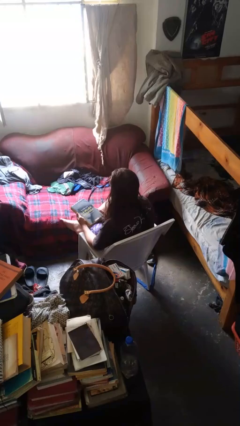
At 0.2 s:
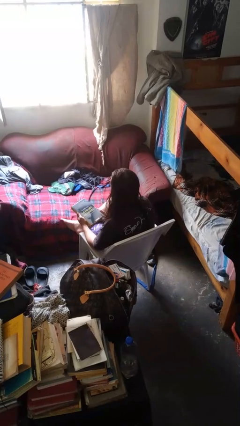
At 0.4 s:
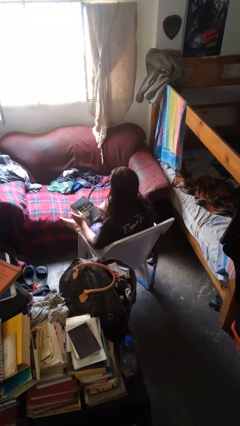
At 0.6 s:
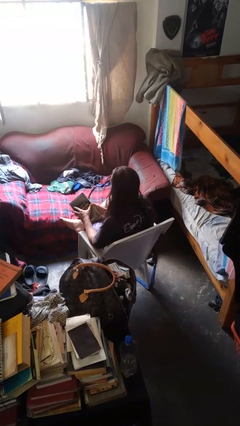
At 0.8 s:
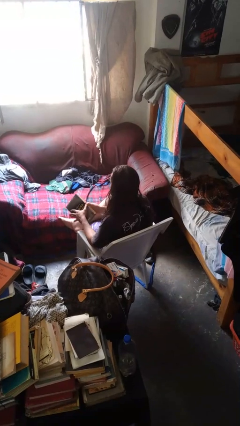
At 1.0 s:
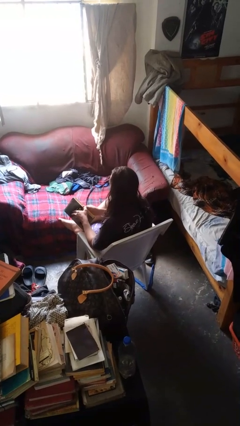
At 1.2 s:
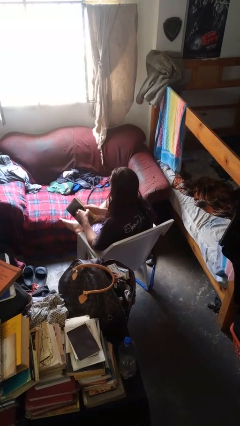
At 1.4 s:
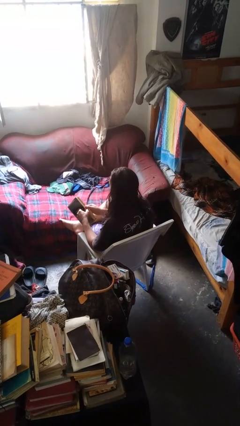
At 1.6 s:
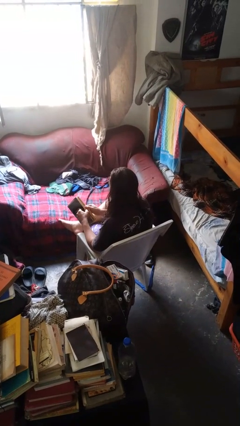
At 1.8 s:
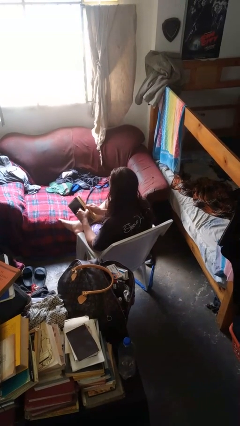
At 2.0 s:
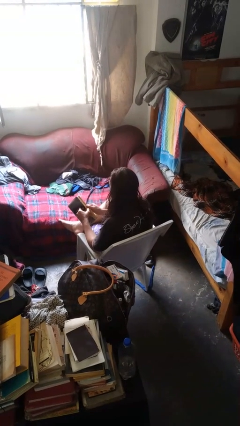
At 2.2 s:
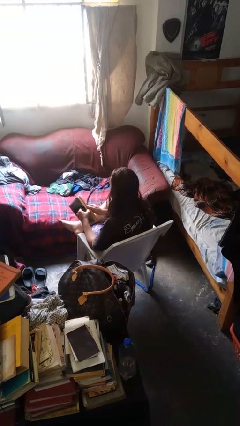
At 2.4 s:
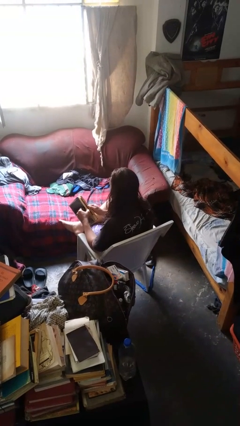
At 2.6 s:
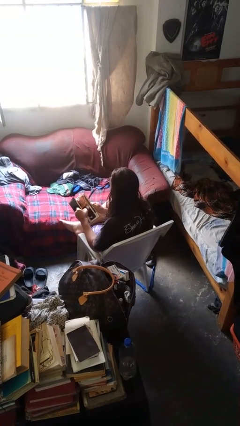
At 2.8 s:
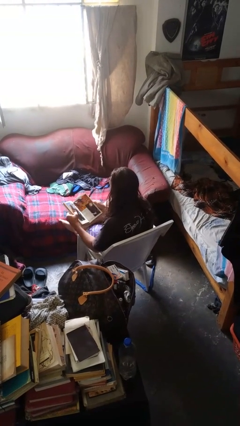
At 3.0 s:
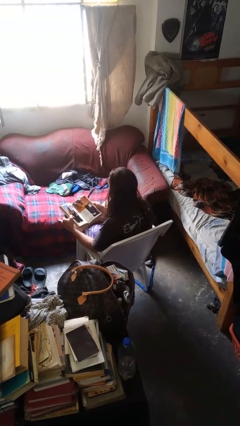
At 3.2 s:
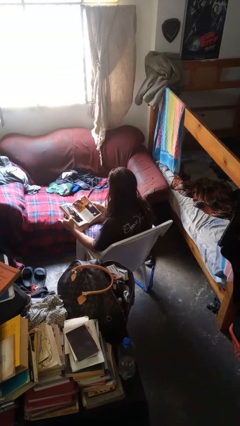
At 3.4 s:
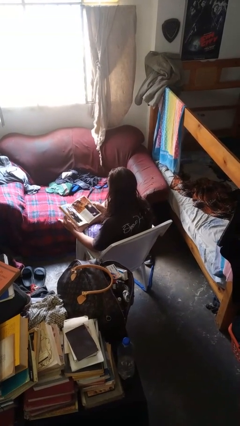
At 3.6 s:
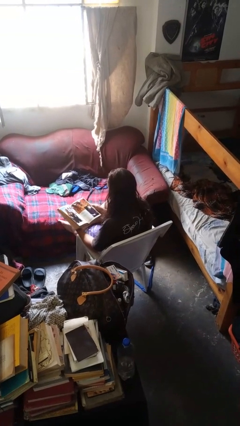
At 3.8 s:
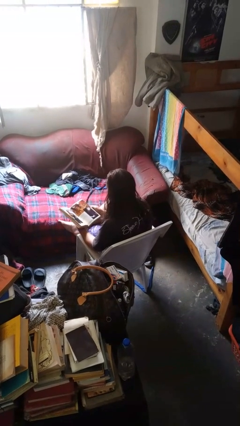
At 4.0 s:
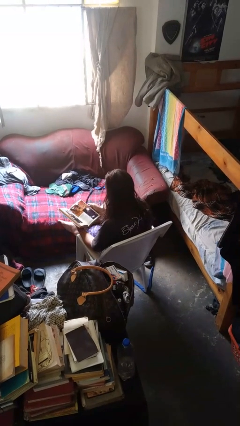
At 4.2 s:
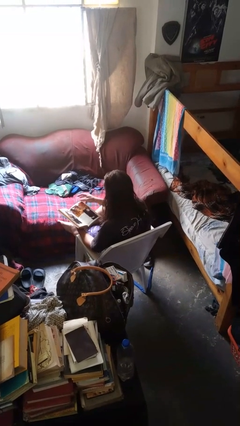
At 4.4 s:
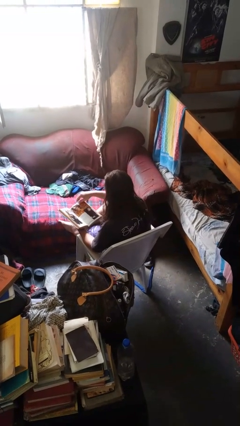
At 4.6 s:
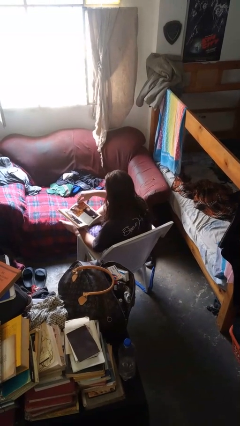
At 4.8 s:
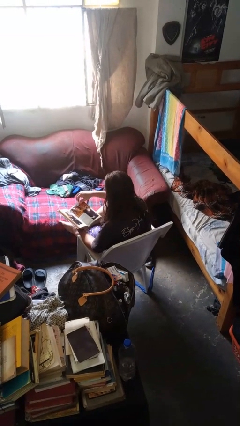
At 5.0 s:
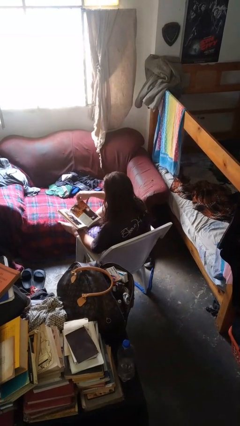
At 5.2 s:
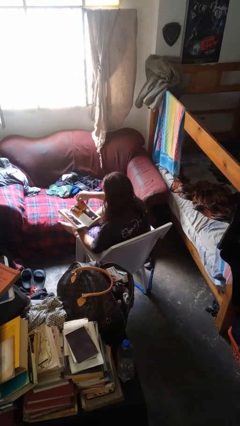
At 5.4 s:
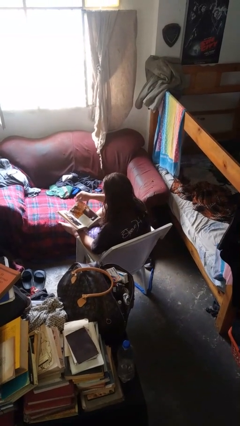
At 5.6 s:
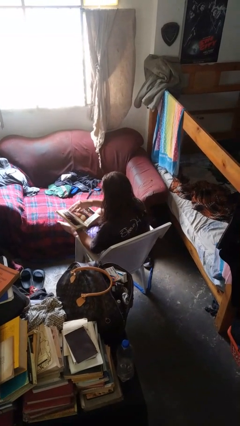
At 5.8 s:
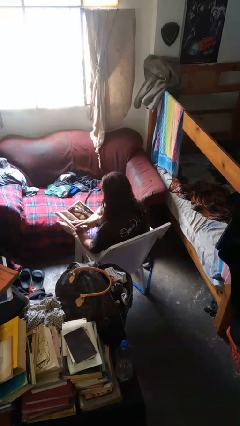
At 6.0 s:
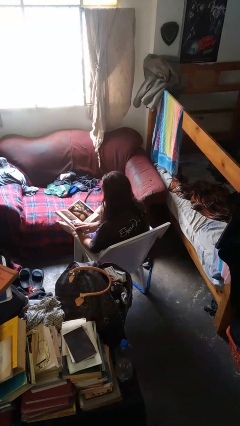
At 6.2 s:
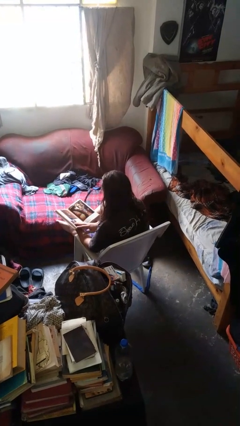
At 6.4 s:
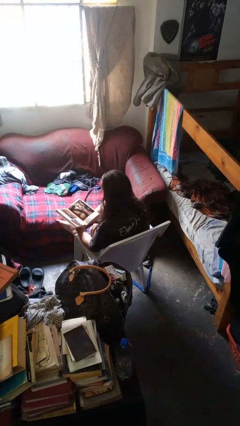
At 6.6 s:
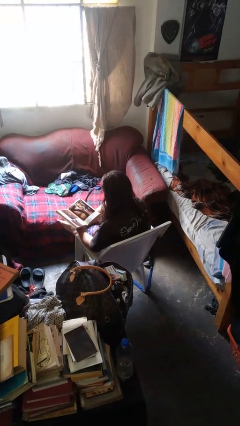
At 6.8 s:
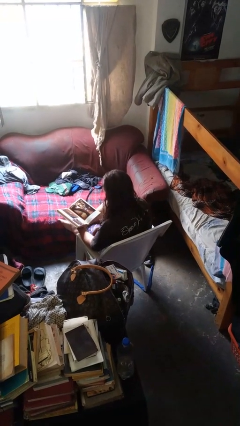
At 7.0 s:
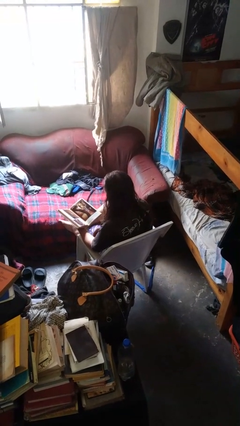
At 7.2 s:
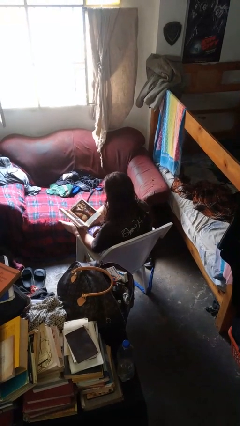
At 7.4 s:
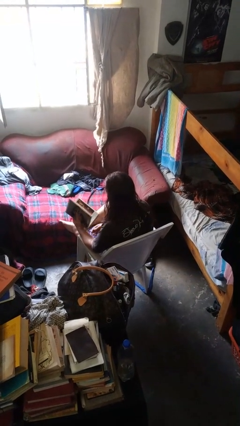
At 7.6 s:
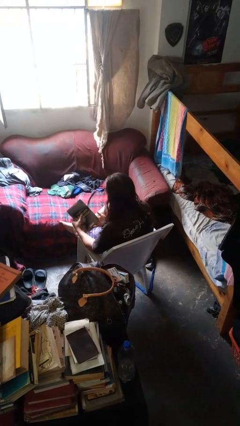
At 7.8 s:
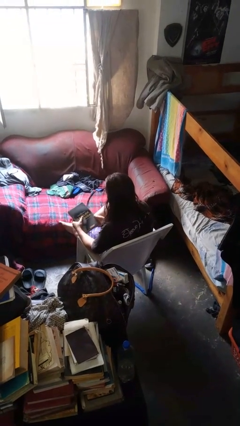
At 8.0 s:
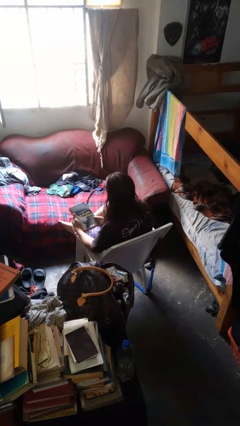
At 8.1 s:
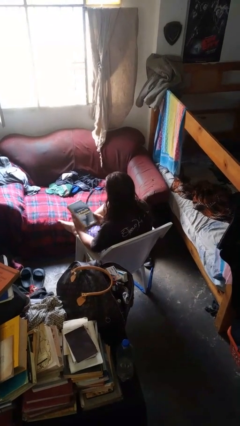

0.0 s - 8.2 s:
person reads book

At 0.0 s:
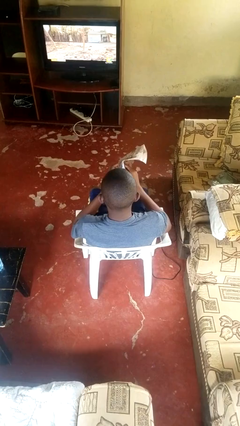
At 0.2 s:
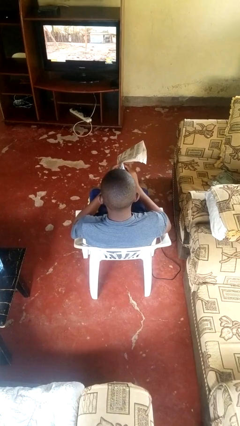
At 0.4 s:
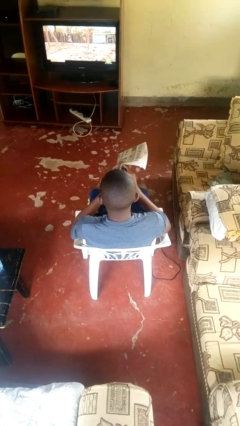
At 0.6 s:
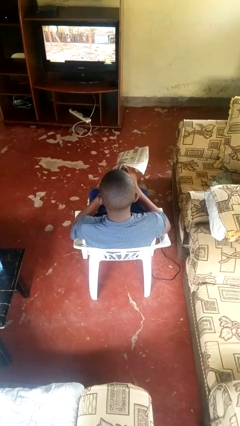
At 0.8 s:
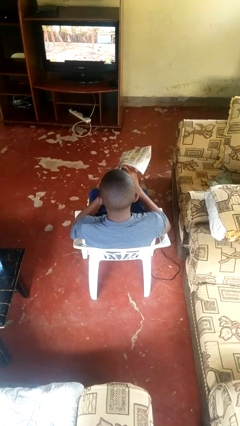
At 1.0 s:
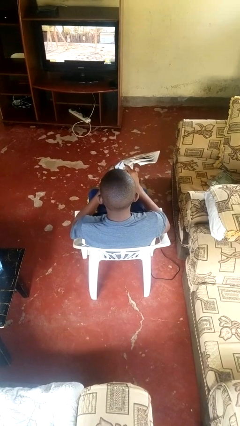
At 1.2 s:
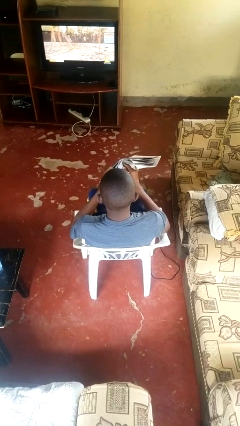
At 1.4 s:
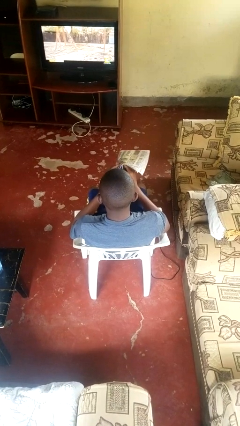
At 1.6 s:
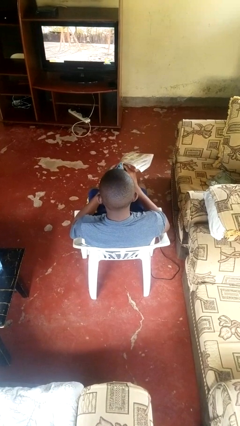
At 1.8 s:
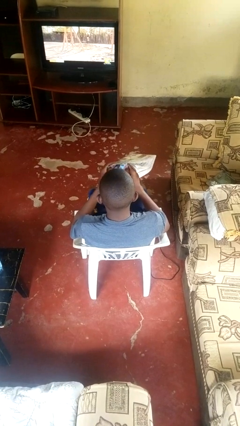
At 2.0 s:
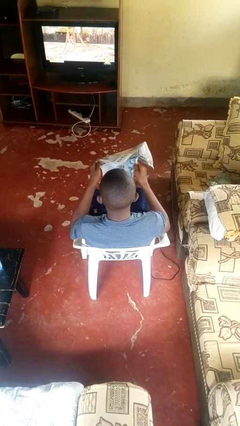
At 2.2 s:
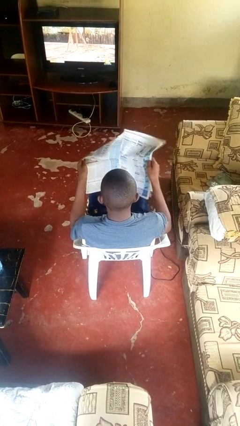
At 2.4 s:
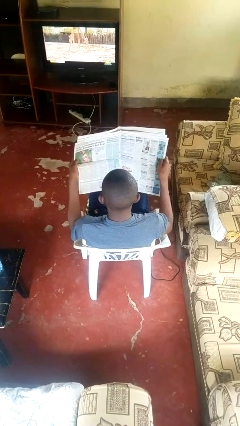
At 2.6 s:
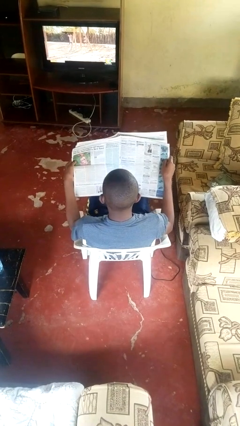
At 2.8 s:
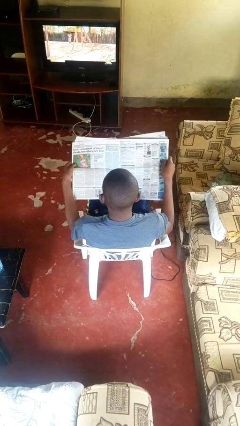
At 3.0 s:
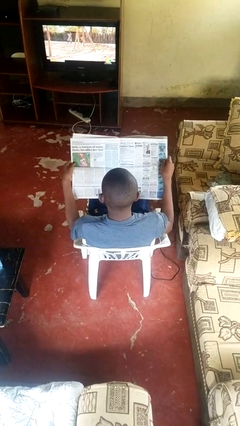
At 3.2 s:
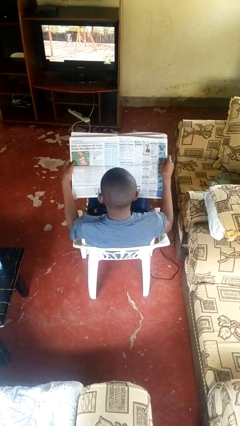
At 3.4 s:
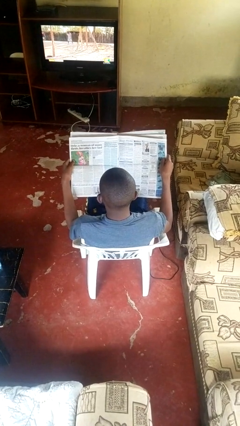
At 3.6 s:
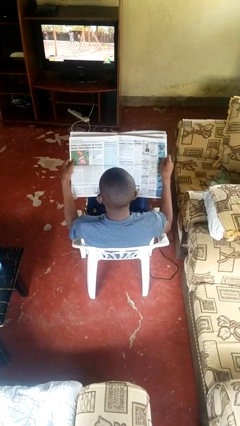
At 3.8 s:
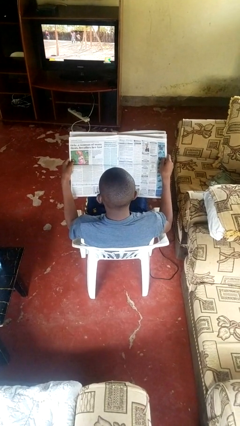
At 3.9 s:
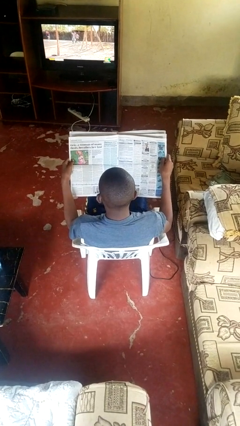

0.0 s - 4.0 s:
person reads newspaper

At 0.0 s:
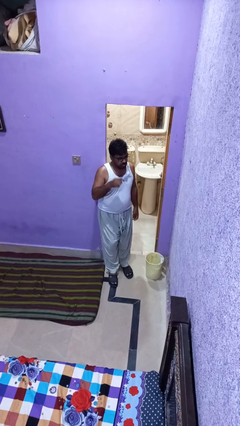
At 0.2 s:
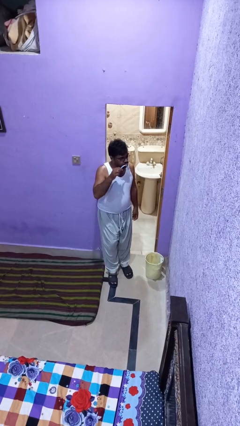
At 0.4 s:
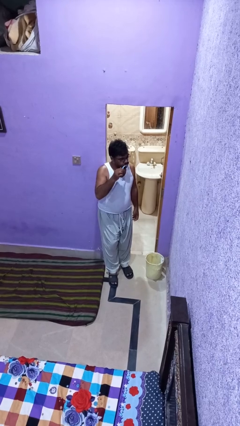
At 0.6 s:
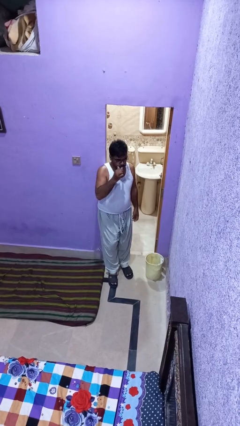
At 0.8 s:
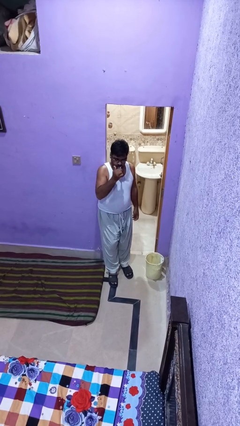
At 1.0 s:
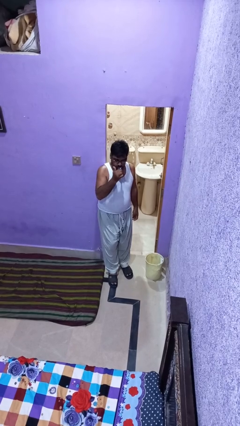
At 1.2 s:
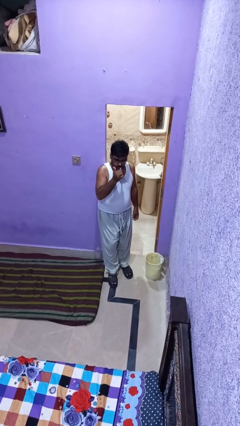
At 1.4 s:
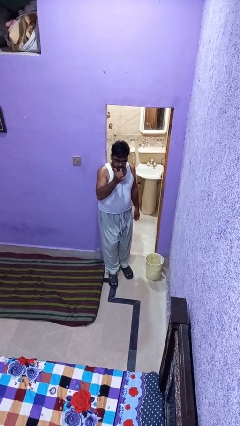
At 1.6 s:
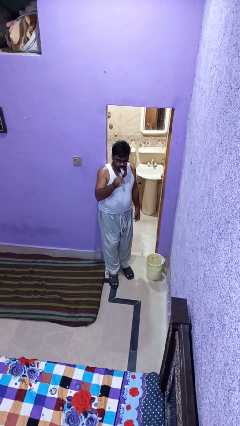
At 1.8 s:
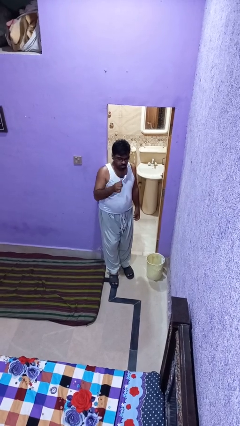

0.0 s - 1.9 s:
person brushes teeth

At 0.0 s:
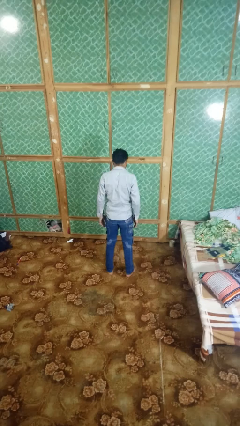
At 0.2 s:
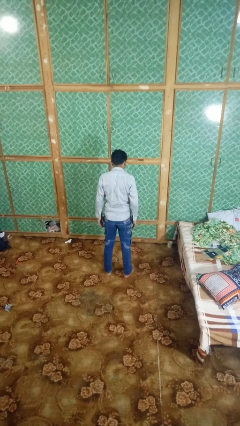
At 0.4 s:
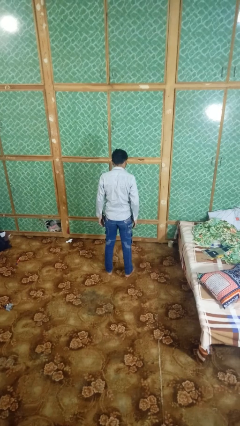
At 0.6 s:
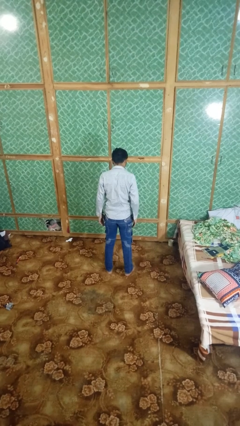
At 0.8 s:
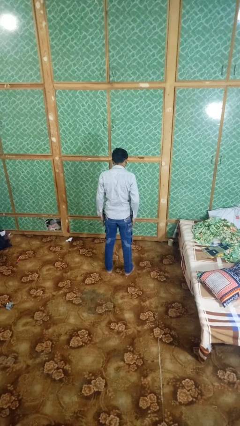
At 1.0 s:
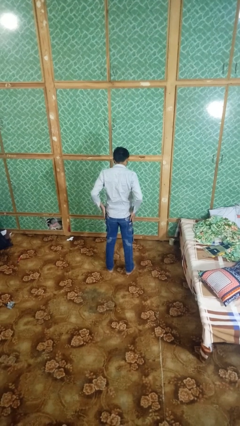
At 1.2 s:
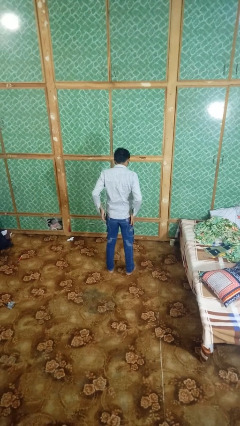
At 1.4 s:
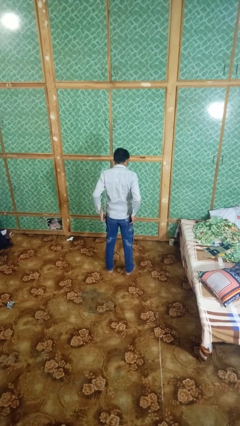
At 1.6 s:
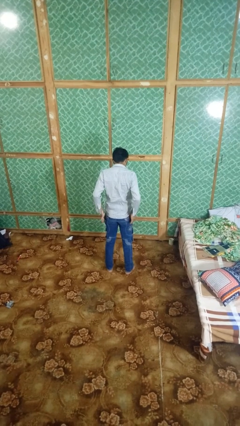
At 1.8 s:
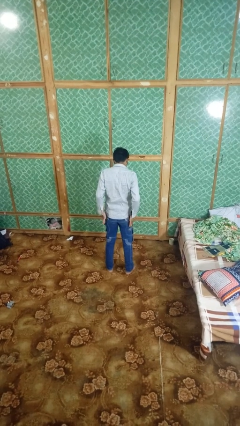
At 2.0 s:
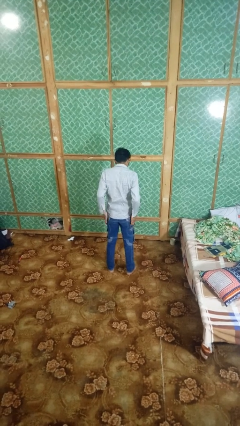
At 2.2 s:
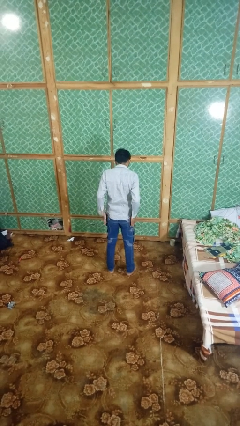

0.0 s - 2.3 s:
person puts hands in back pockets

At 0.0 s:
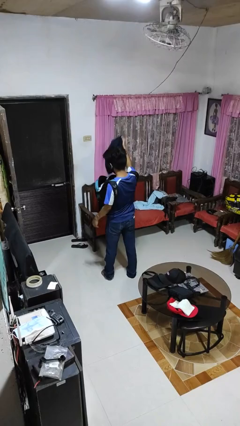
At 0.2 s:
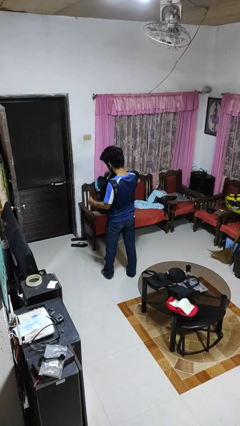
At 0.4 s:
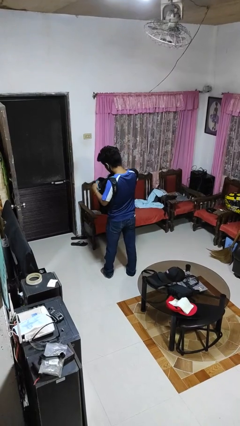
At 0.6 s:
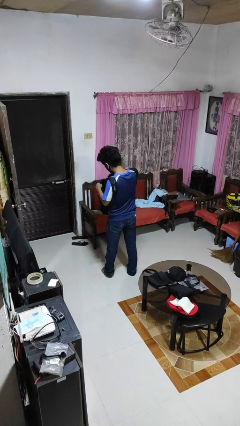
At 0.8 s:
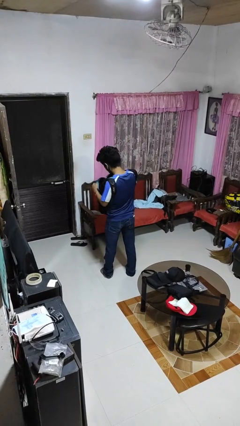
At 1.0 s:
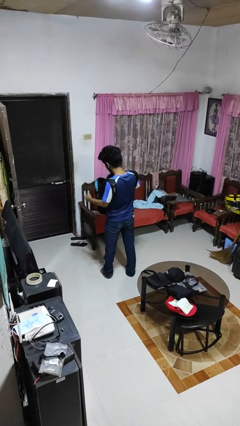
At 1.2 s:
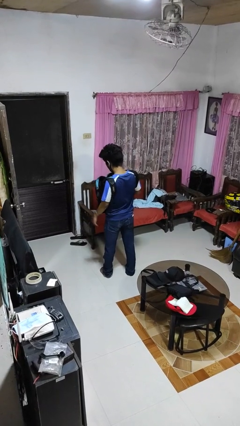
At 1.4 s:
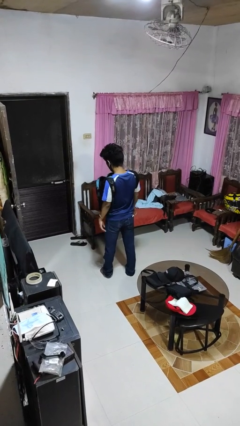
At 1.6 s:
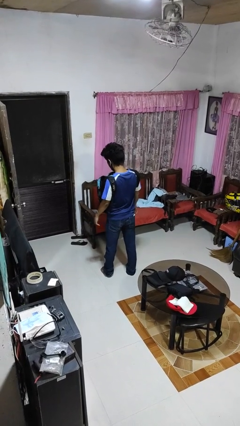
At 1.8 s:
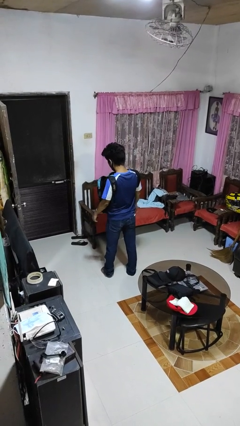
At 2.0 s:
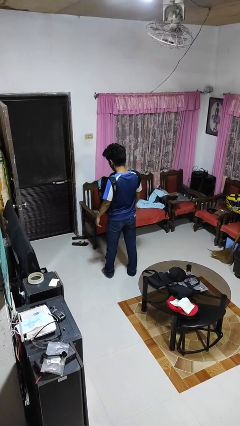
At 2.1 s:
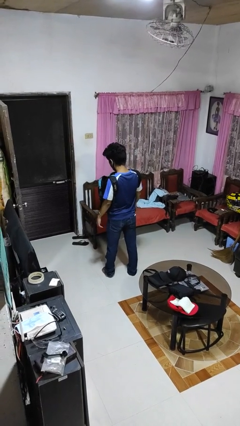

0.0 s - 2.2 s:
person puts object into backpack
